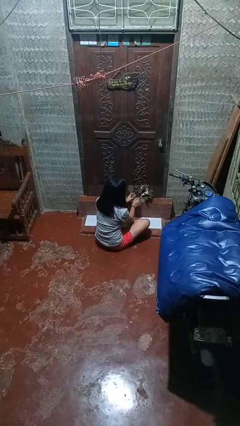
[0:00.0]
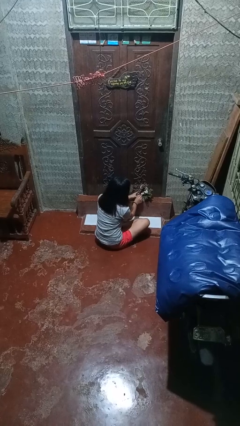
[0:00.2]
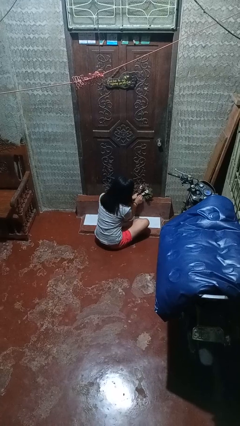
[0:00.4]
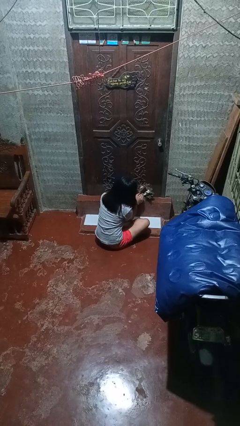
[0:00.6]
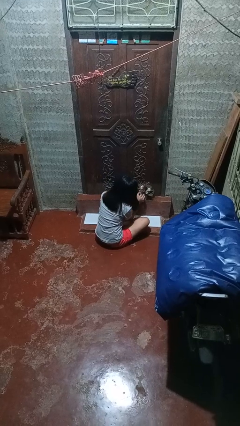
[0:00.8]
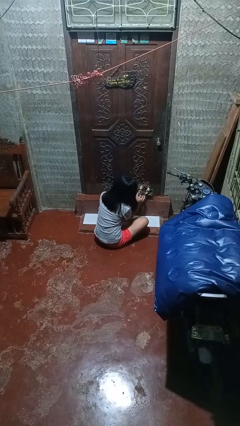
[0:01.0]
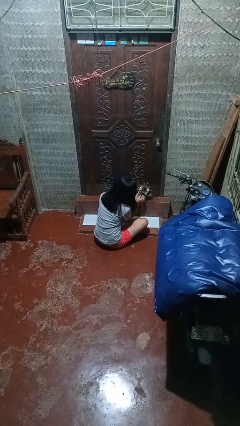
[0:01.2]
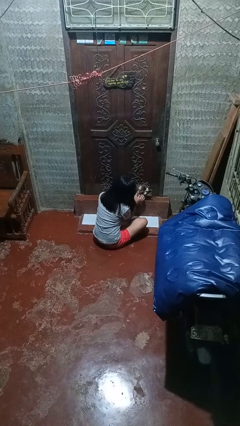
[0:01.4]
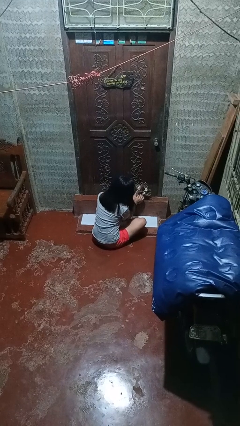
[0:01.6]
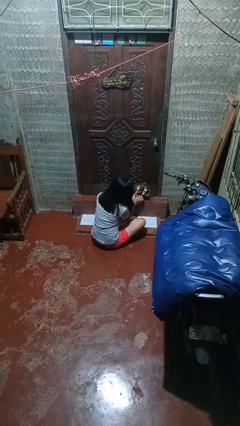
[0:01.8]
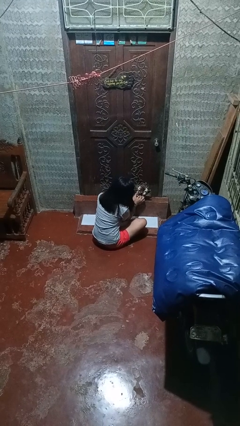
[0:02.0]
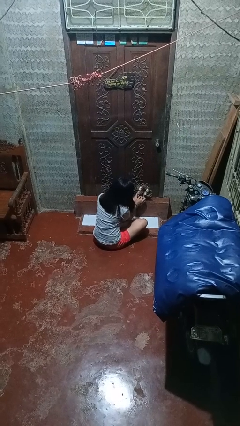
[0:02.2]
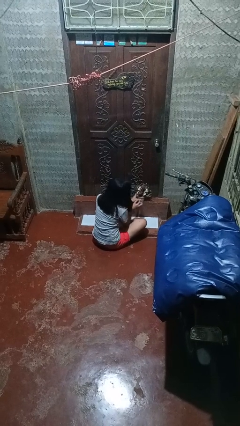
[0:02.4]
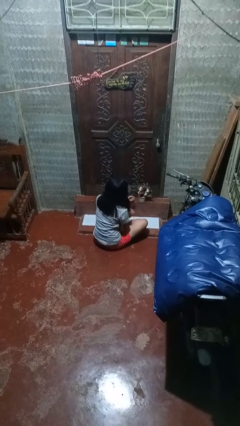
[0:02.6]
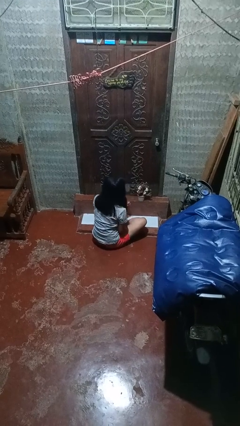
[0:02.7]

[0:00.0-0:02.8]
person arranges flowers in vase

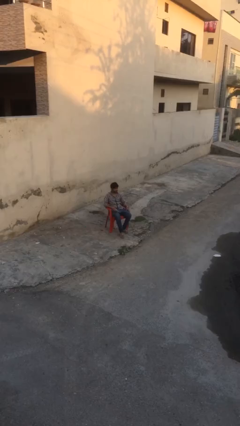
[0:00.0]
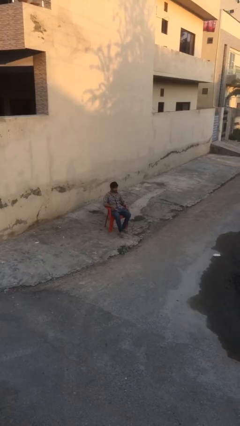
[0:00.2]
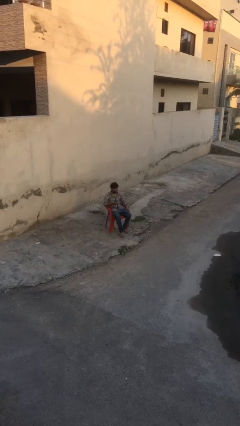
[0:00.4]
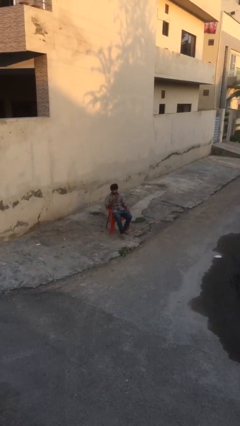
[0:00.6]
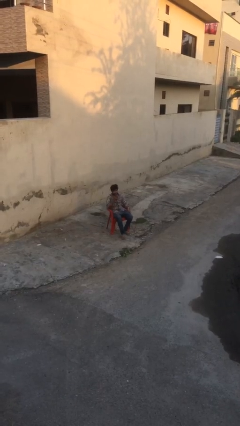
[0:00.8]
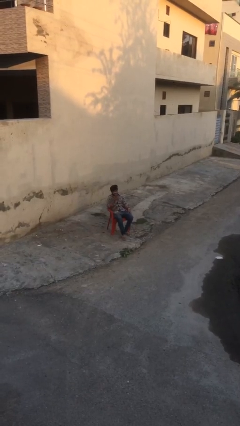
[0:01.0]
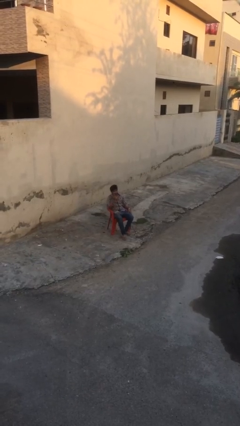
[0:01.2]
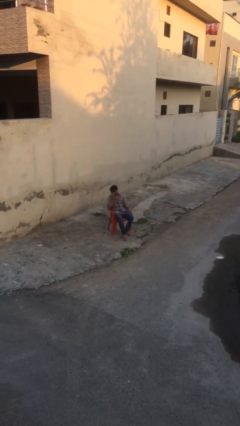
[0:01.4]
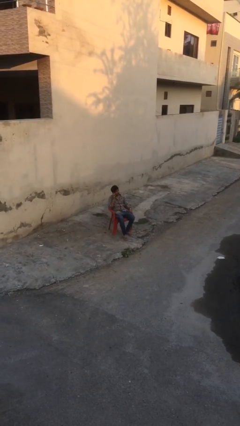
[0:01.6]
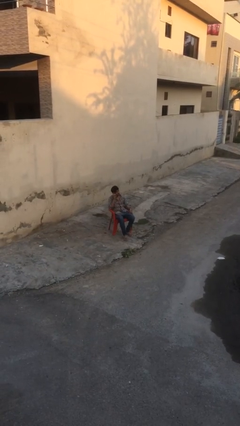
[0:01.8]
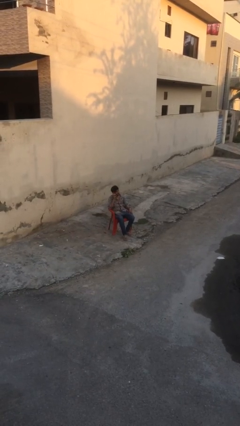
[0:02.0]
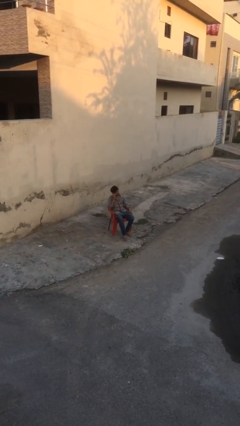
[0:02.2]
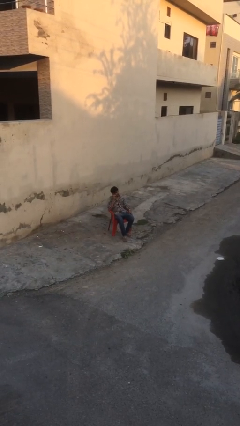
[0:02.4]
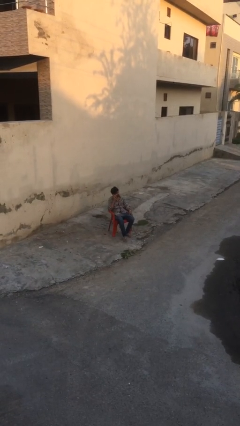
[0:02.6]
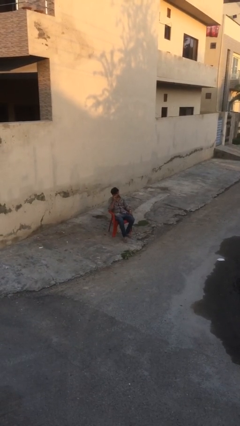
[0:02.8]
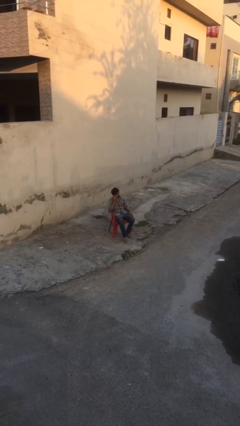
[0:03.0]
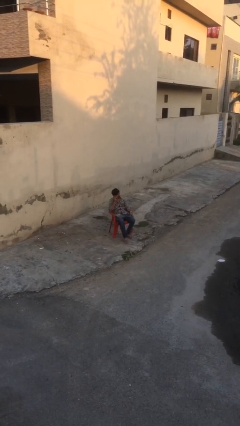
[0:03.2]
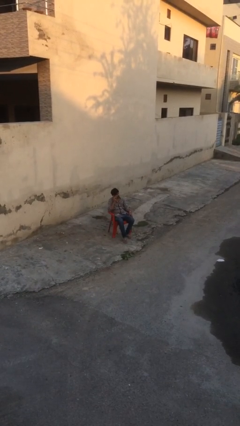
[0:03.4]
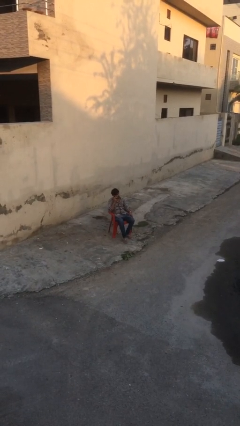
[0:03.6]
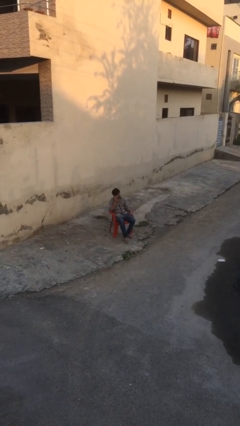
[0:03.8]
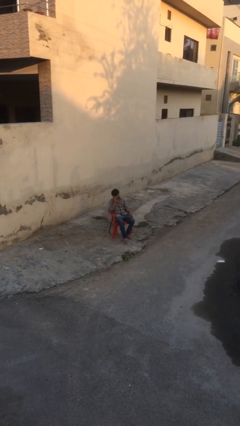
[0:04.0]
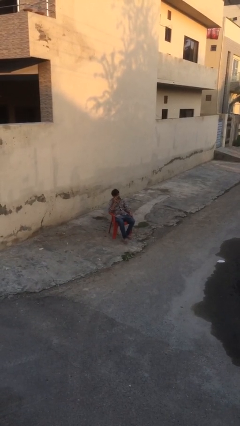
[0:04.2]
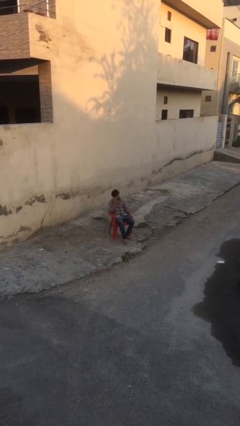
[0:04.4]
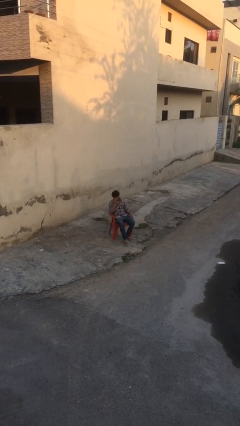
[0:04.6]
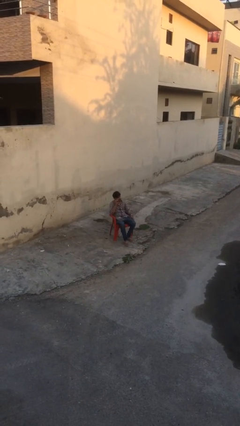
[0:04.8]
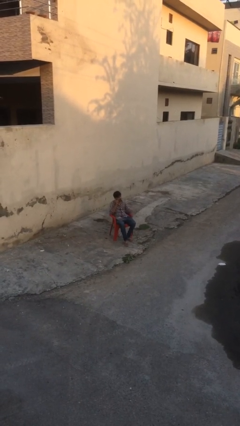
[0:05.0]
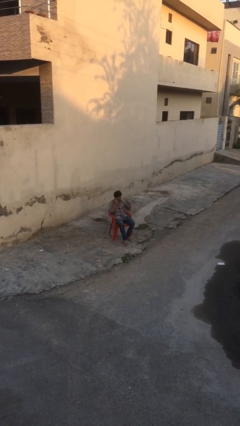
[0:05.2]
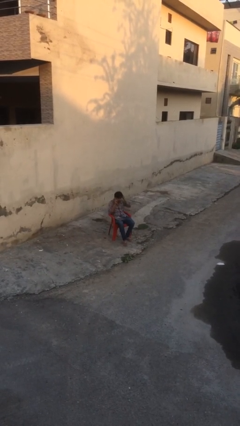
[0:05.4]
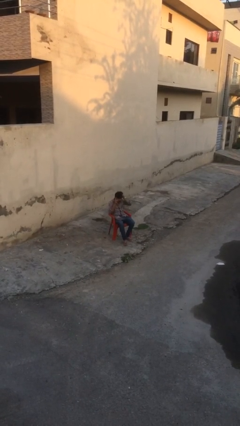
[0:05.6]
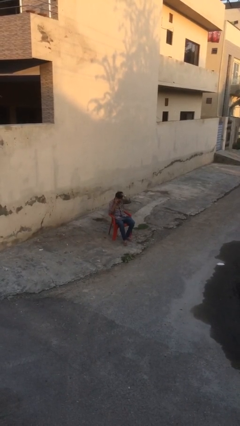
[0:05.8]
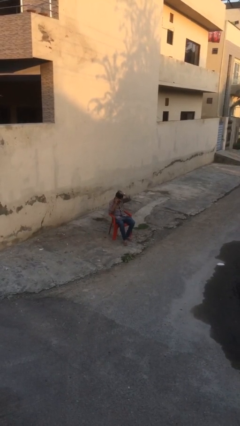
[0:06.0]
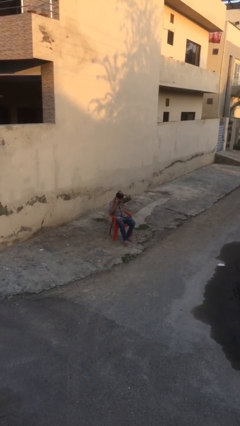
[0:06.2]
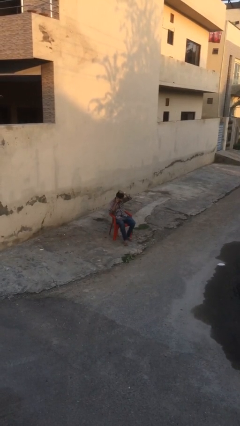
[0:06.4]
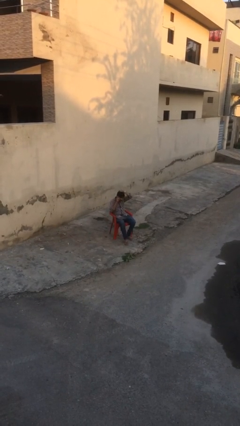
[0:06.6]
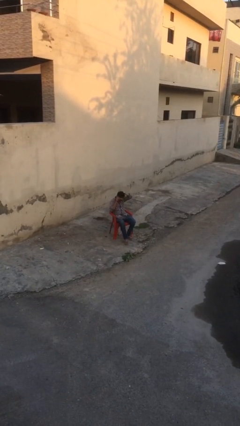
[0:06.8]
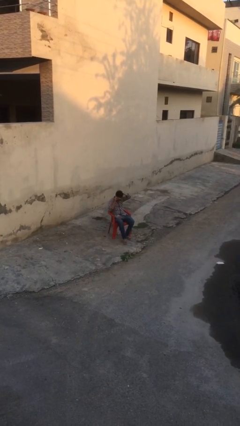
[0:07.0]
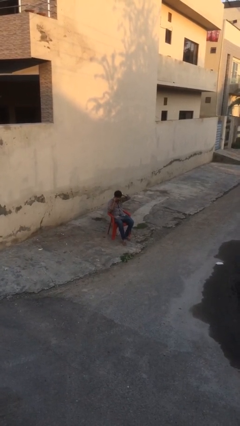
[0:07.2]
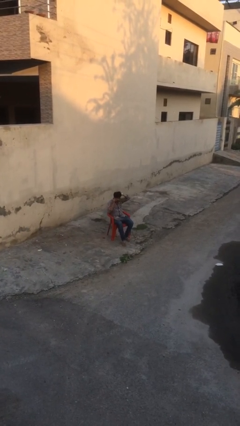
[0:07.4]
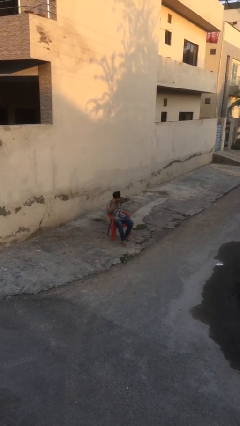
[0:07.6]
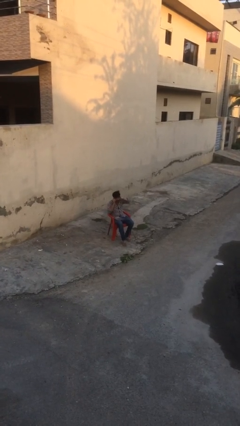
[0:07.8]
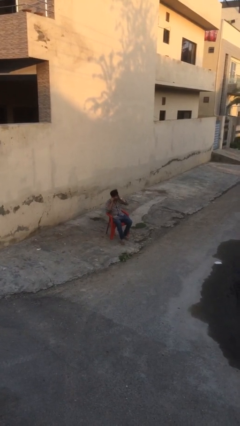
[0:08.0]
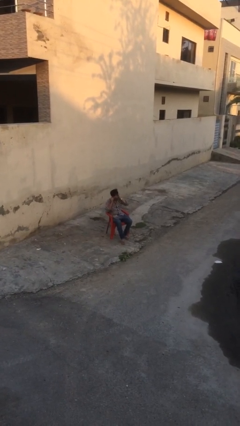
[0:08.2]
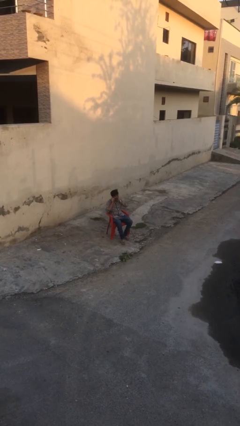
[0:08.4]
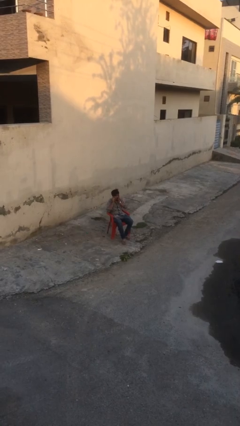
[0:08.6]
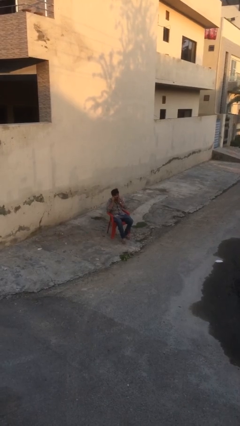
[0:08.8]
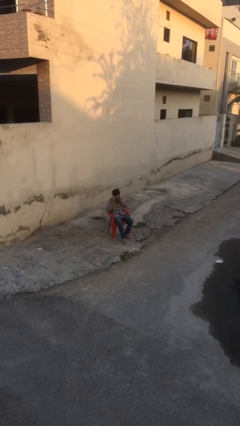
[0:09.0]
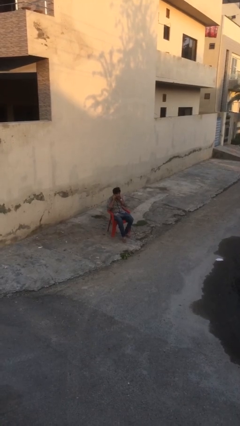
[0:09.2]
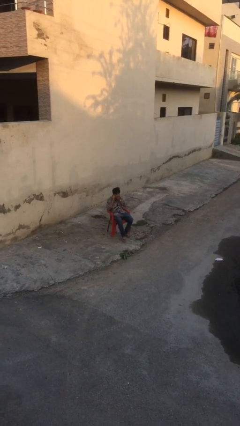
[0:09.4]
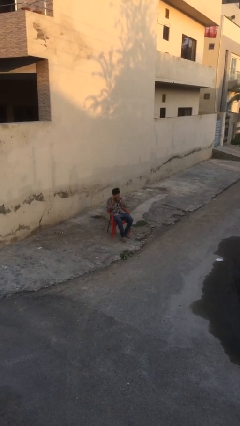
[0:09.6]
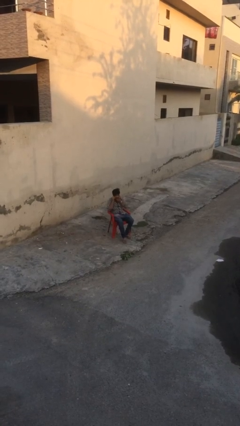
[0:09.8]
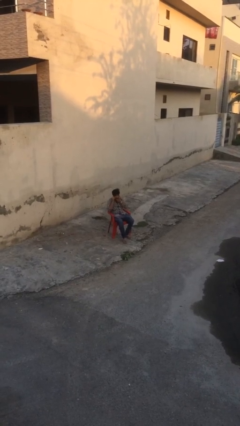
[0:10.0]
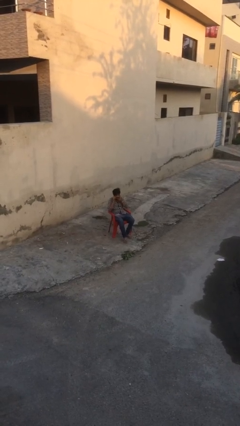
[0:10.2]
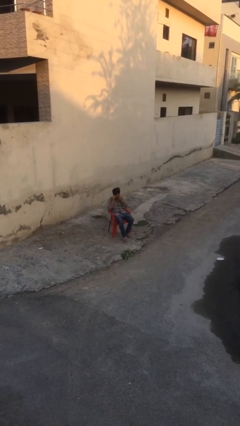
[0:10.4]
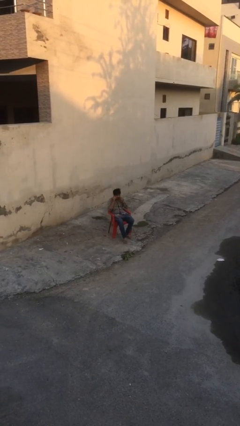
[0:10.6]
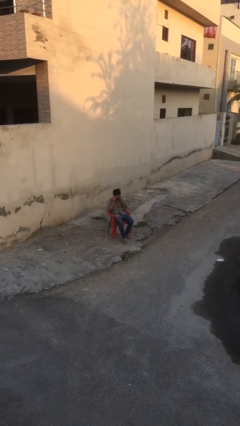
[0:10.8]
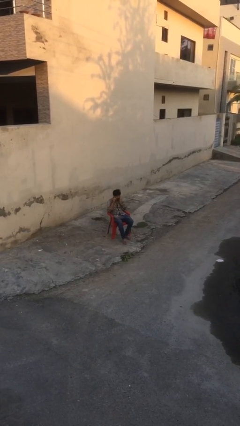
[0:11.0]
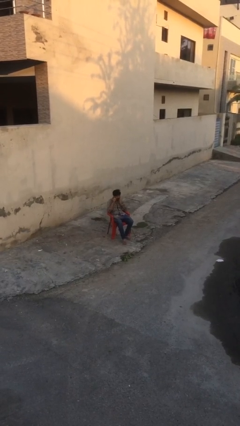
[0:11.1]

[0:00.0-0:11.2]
person talks on phone

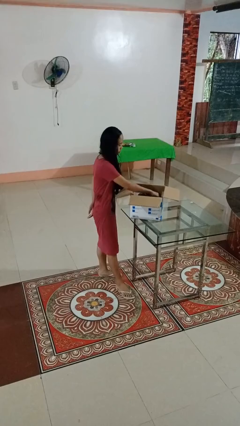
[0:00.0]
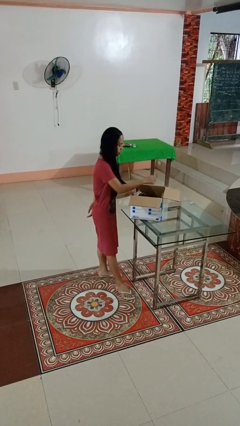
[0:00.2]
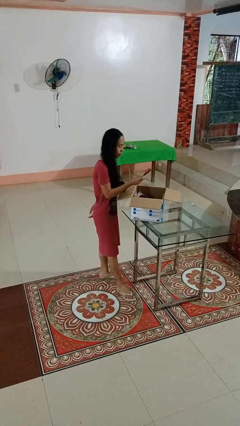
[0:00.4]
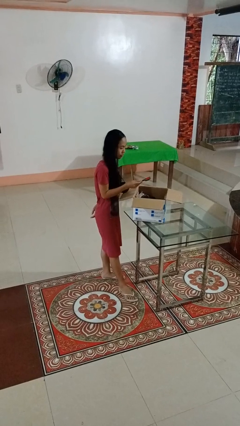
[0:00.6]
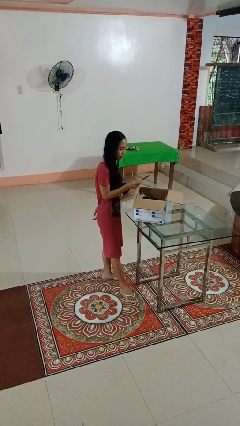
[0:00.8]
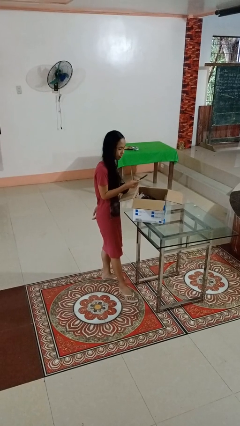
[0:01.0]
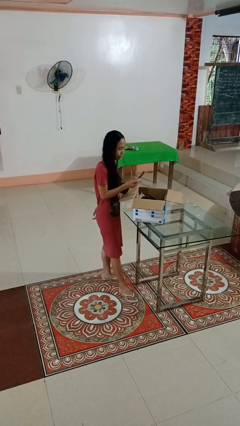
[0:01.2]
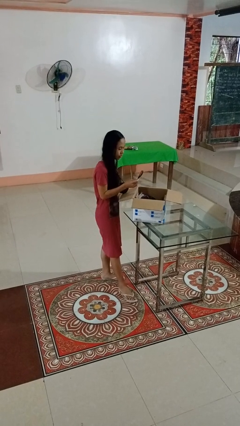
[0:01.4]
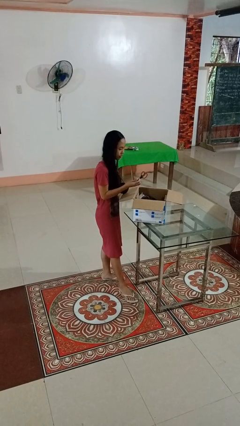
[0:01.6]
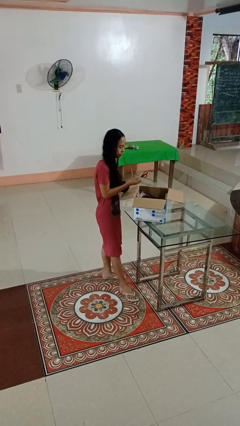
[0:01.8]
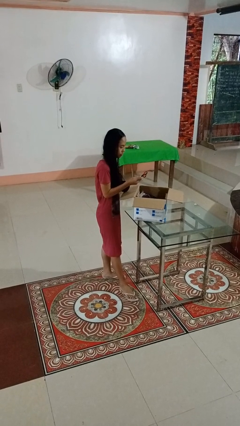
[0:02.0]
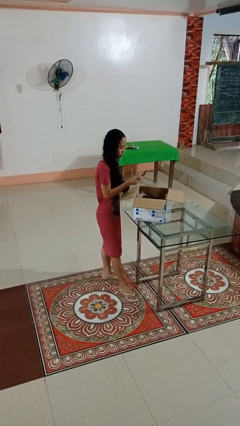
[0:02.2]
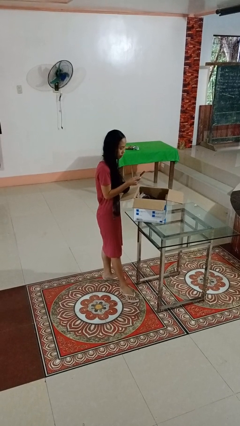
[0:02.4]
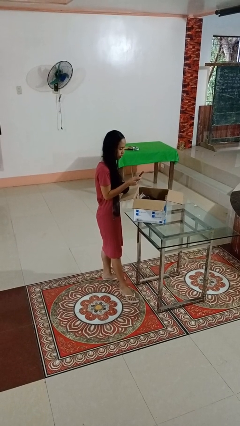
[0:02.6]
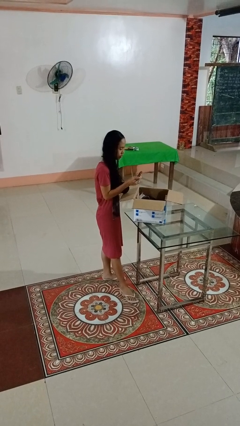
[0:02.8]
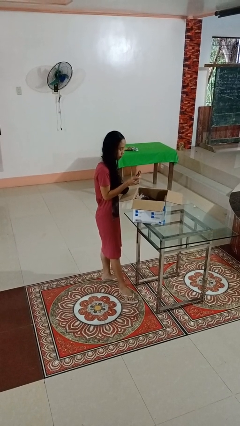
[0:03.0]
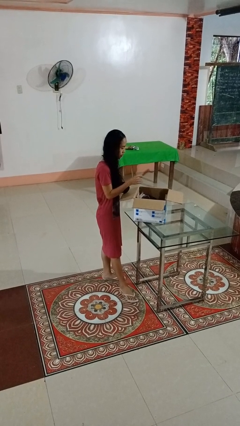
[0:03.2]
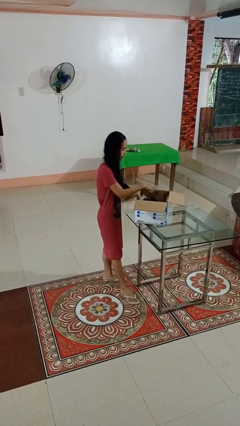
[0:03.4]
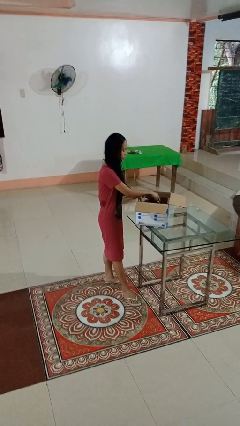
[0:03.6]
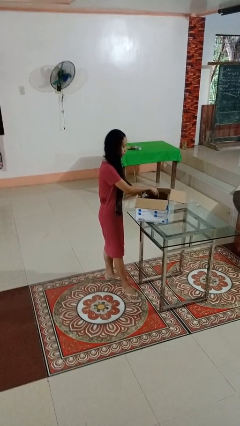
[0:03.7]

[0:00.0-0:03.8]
person takes object from box
